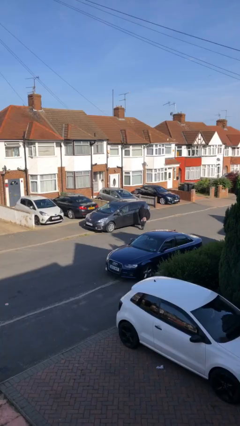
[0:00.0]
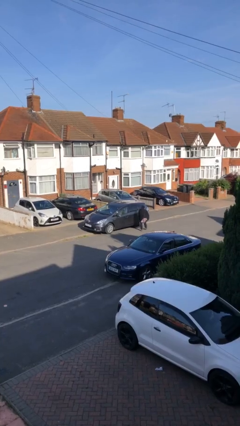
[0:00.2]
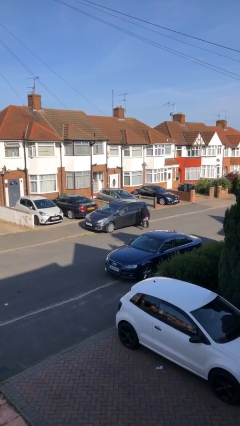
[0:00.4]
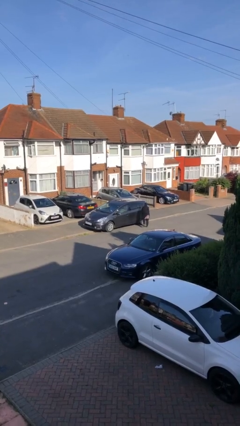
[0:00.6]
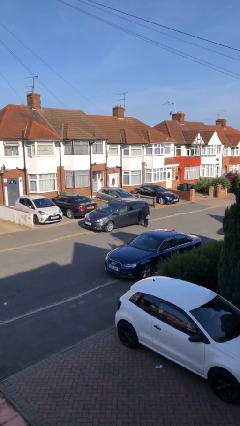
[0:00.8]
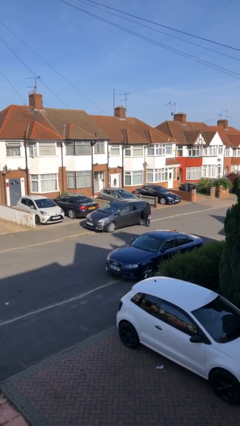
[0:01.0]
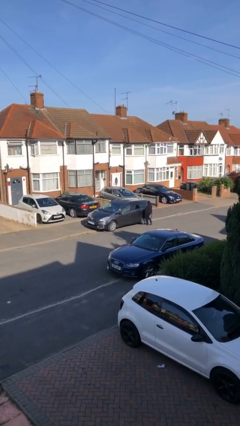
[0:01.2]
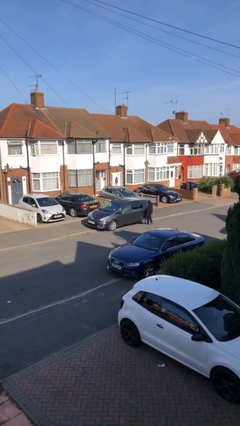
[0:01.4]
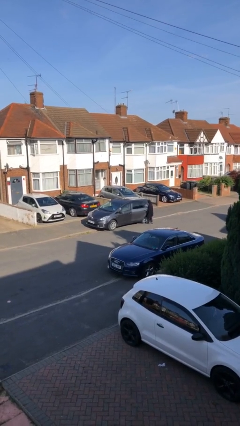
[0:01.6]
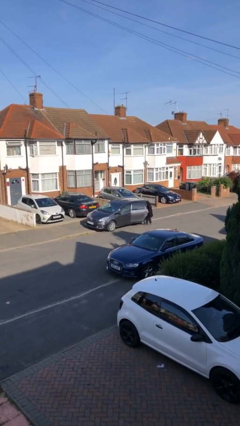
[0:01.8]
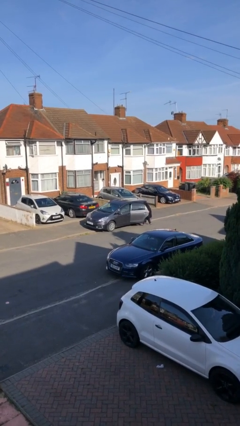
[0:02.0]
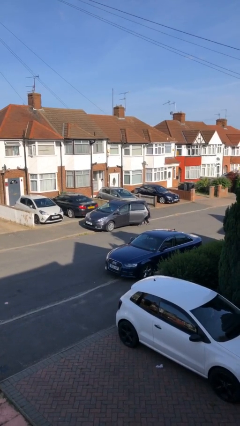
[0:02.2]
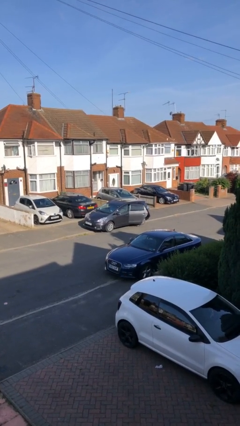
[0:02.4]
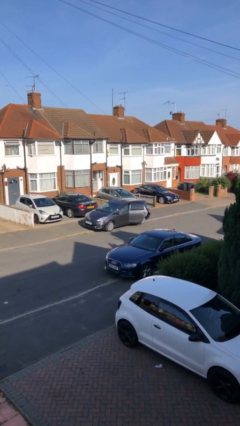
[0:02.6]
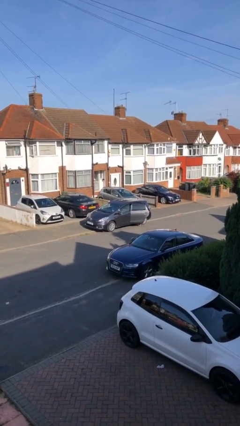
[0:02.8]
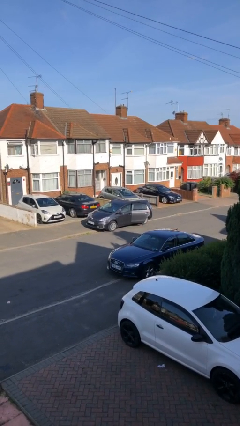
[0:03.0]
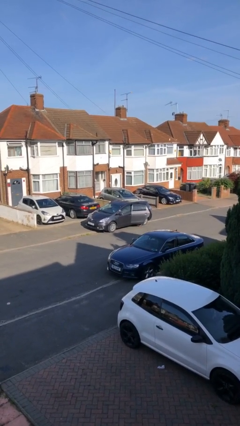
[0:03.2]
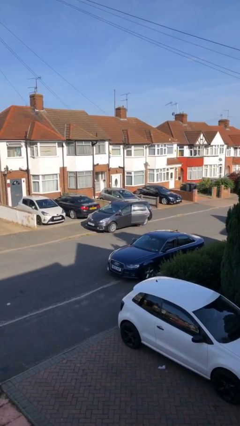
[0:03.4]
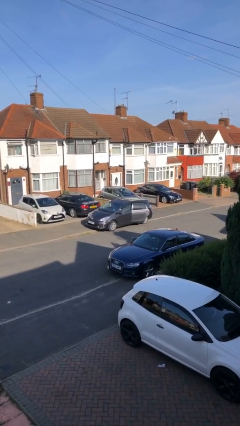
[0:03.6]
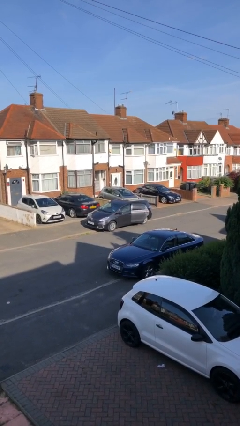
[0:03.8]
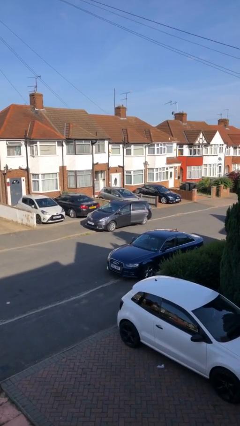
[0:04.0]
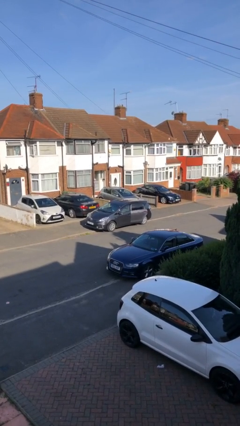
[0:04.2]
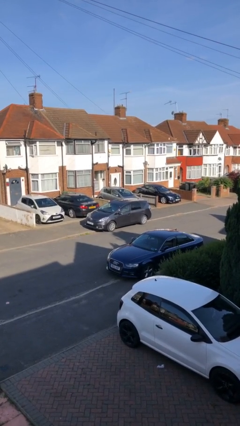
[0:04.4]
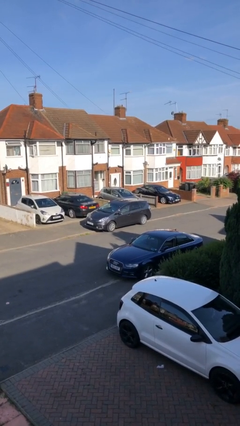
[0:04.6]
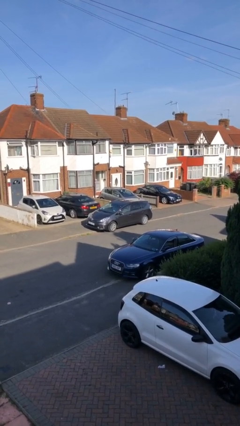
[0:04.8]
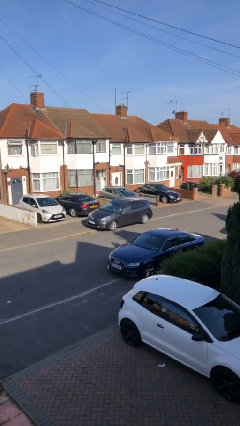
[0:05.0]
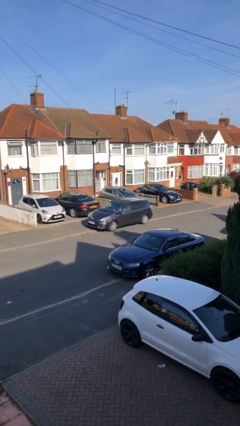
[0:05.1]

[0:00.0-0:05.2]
car picks up person

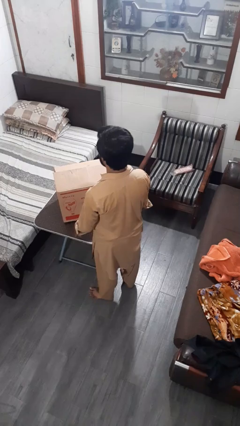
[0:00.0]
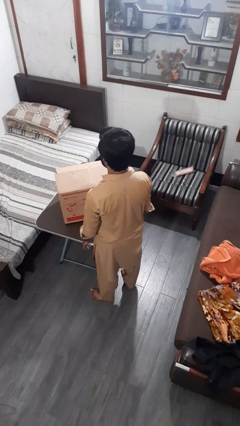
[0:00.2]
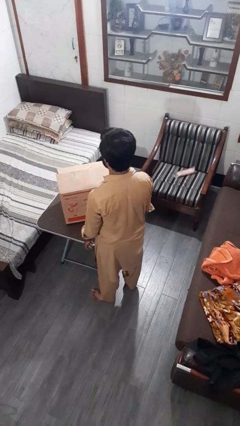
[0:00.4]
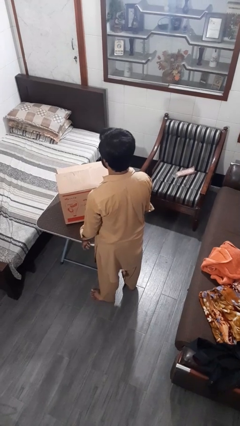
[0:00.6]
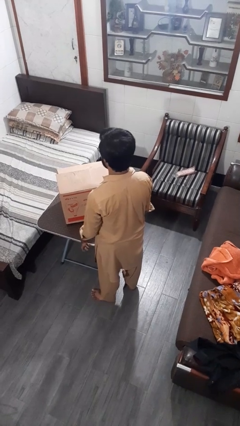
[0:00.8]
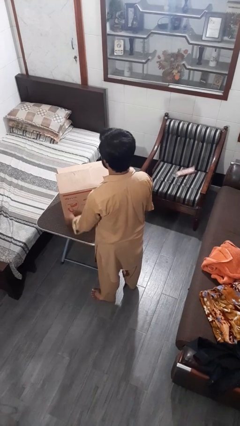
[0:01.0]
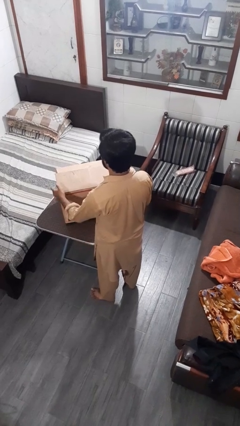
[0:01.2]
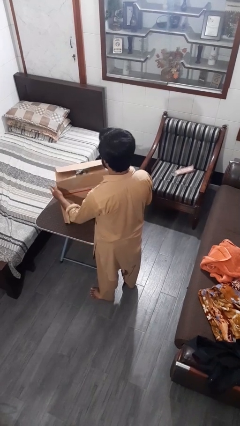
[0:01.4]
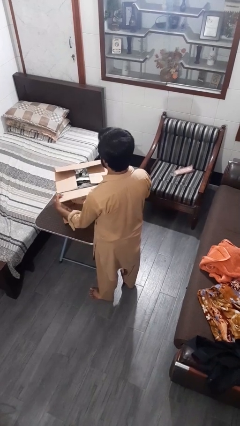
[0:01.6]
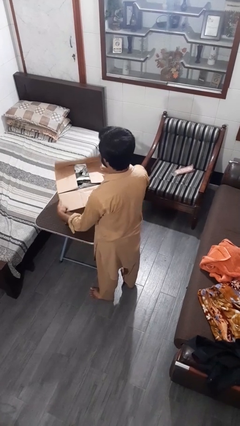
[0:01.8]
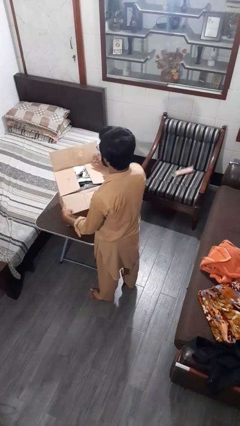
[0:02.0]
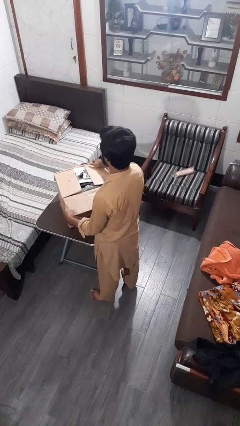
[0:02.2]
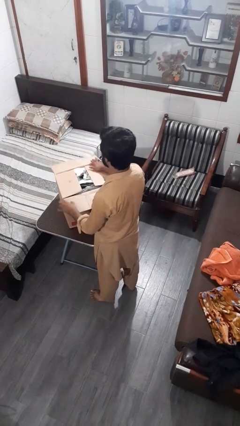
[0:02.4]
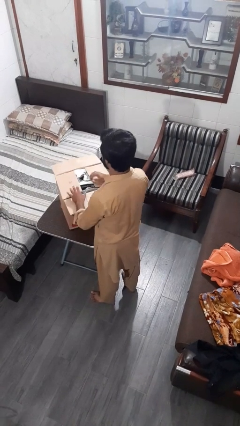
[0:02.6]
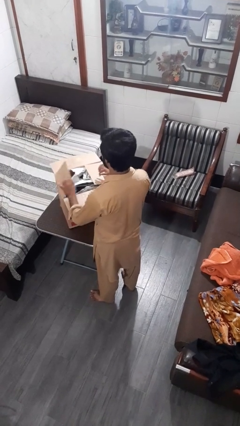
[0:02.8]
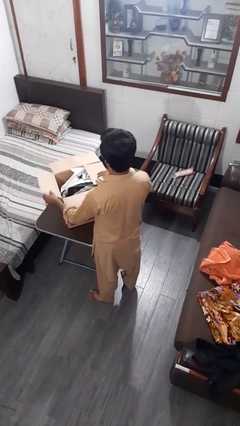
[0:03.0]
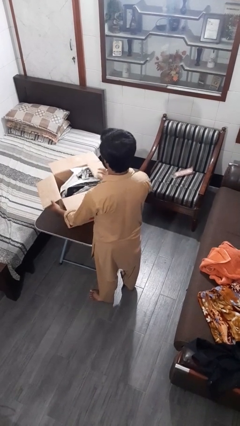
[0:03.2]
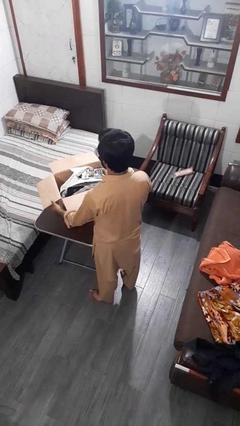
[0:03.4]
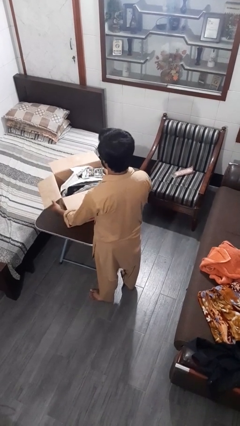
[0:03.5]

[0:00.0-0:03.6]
person opens box

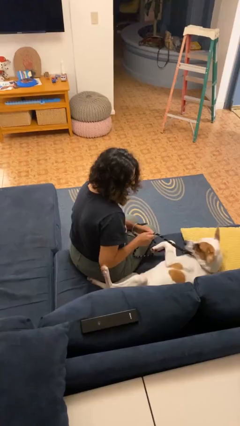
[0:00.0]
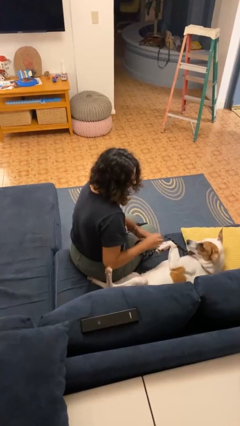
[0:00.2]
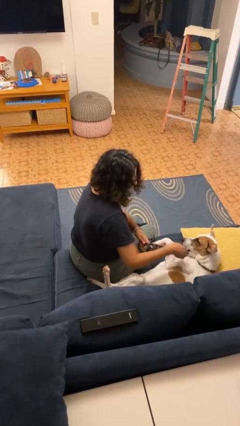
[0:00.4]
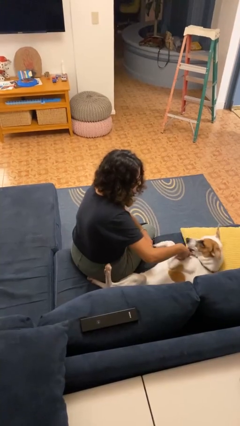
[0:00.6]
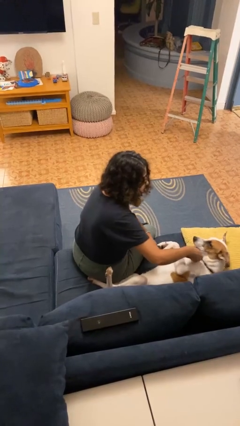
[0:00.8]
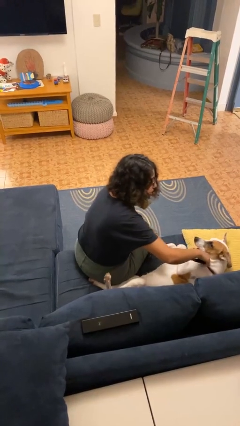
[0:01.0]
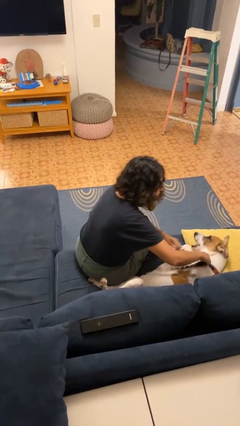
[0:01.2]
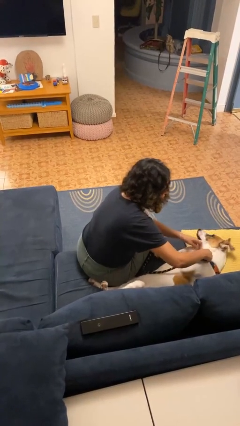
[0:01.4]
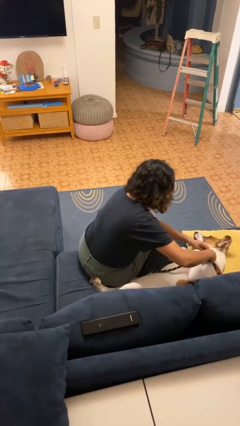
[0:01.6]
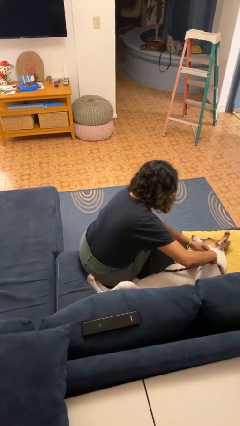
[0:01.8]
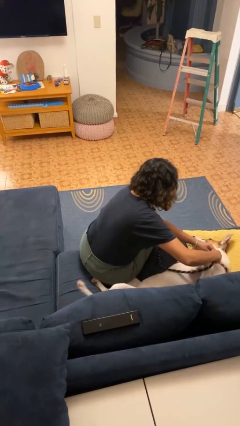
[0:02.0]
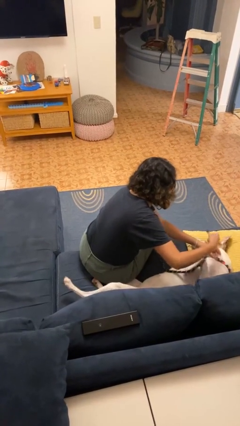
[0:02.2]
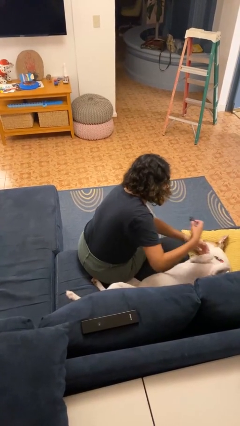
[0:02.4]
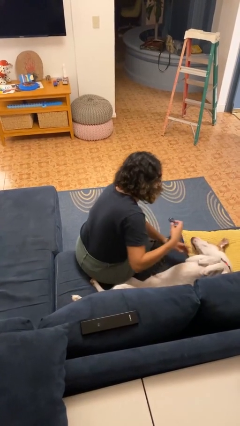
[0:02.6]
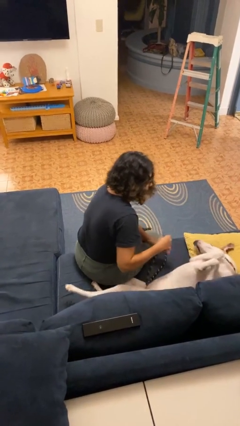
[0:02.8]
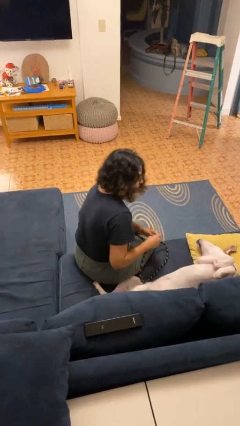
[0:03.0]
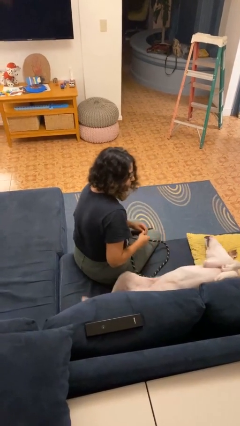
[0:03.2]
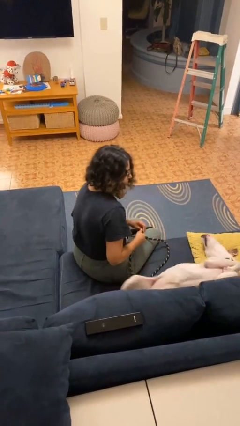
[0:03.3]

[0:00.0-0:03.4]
person unattaches leash from dog

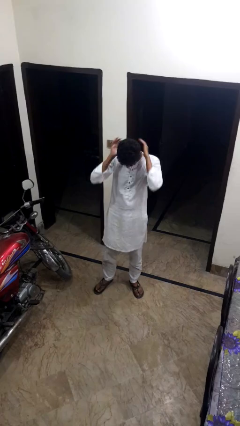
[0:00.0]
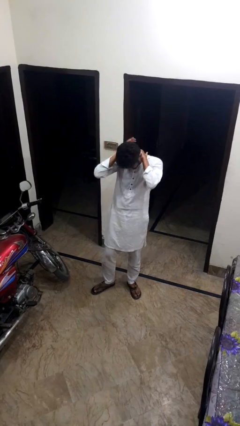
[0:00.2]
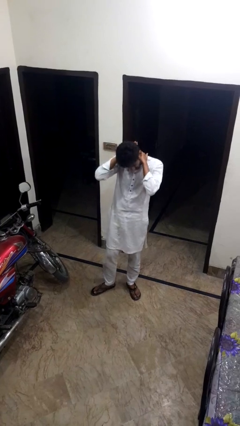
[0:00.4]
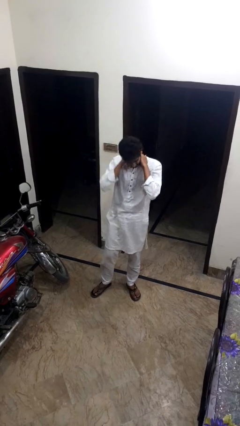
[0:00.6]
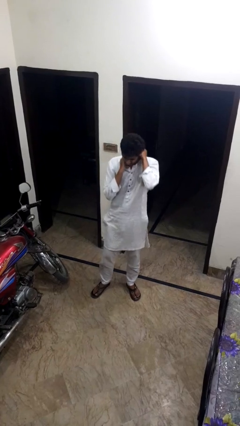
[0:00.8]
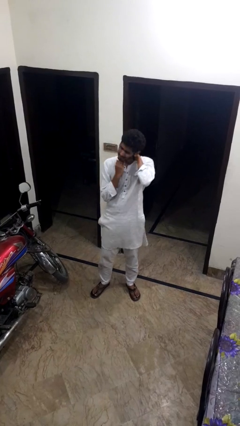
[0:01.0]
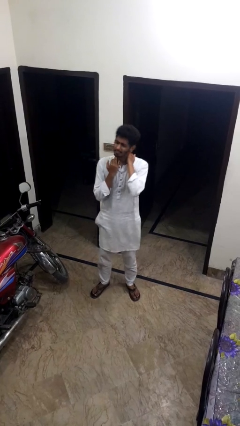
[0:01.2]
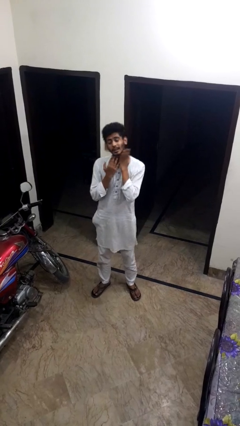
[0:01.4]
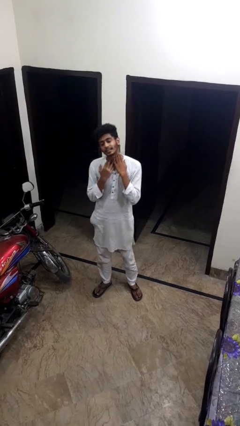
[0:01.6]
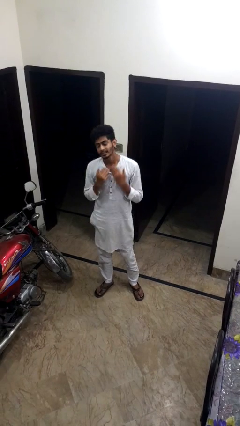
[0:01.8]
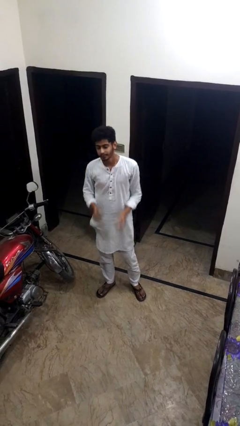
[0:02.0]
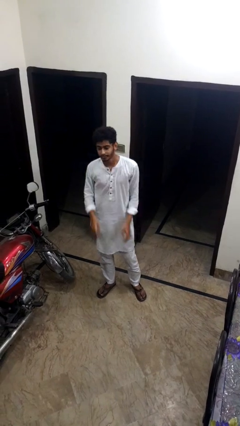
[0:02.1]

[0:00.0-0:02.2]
person rubs neck

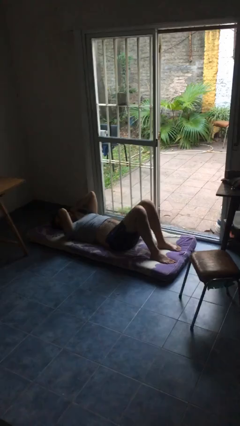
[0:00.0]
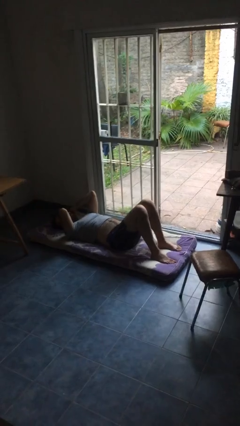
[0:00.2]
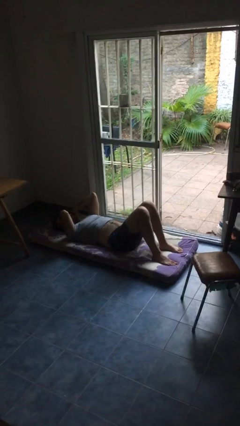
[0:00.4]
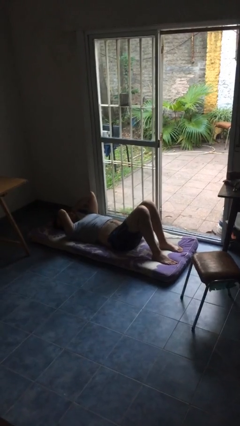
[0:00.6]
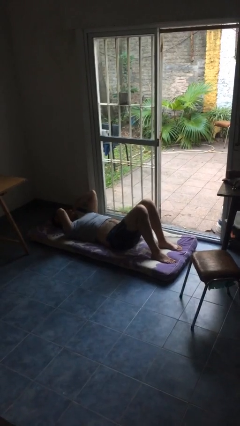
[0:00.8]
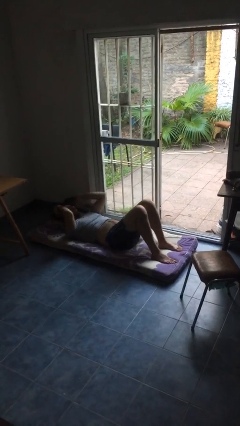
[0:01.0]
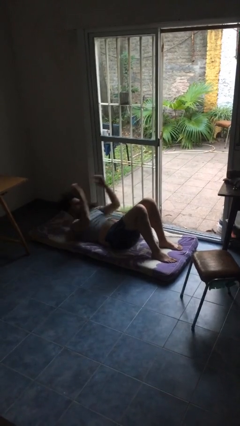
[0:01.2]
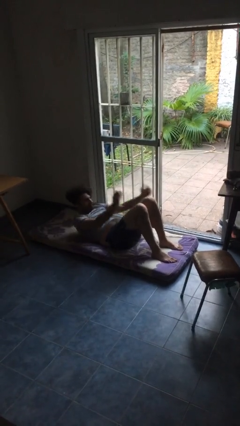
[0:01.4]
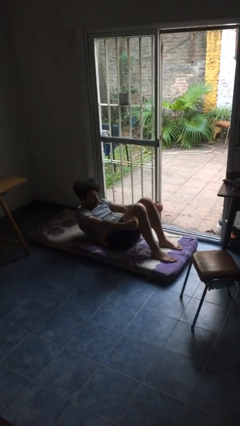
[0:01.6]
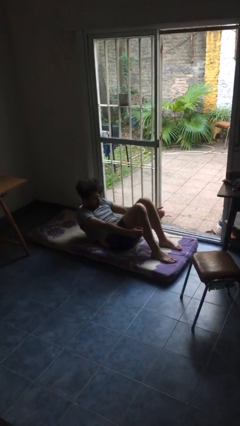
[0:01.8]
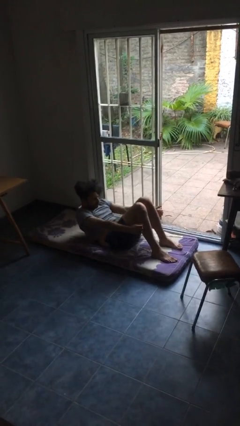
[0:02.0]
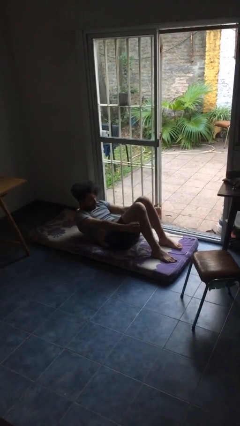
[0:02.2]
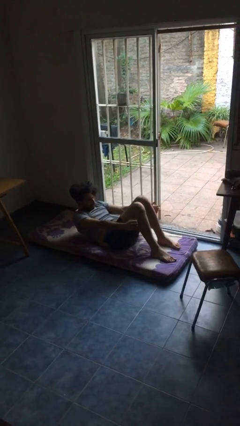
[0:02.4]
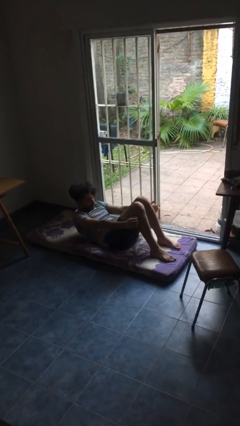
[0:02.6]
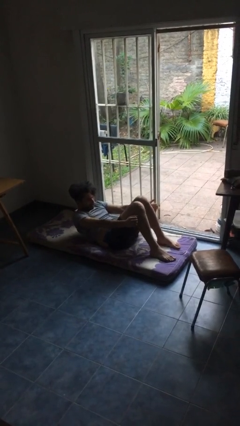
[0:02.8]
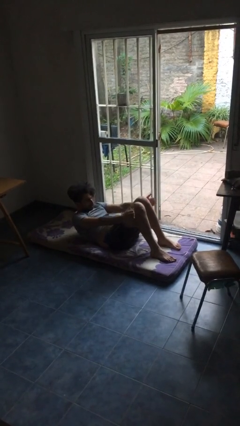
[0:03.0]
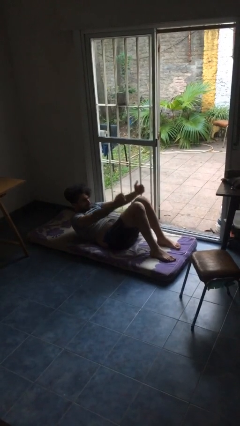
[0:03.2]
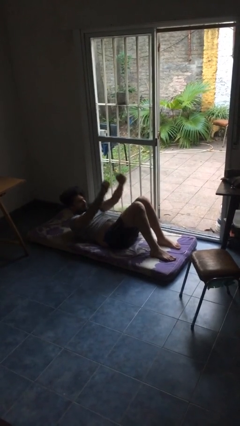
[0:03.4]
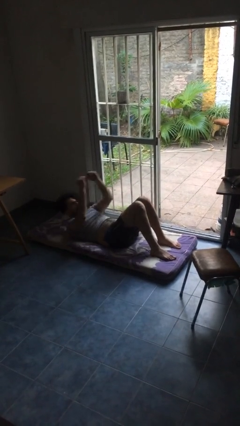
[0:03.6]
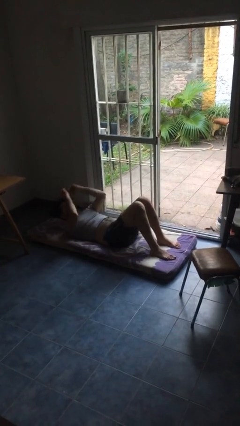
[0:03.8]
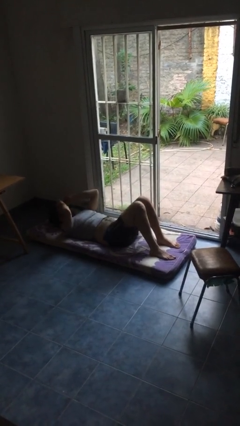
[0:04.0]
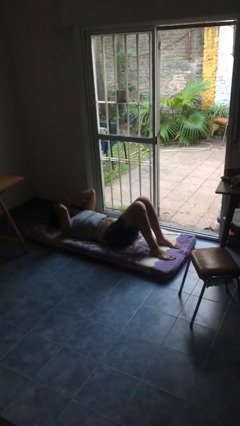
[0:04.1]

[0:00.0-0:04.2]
person exercises with situp
